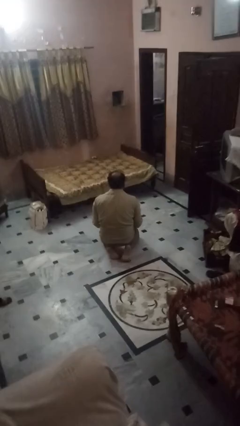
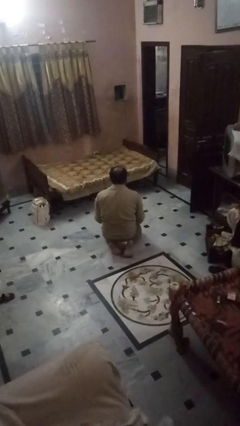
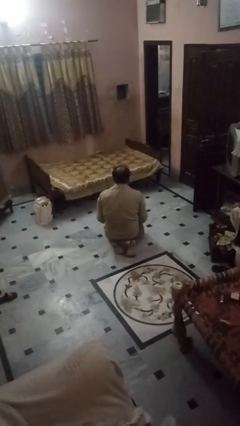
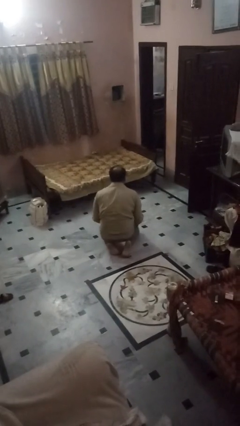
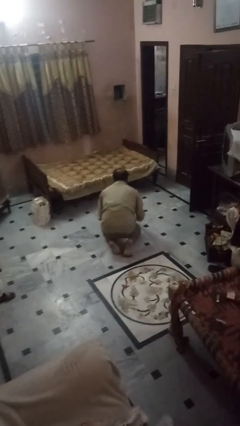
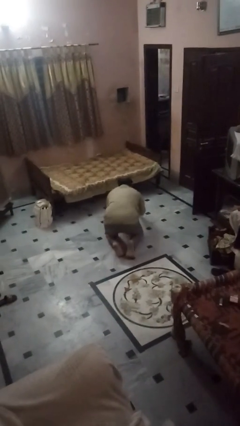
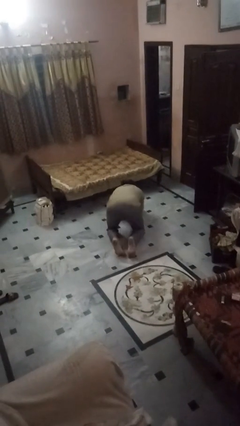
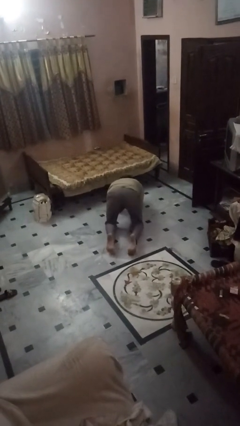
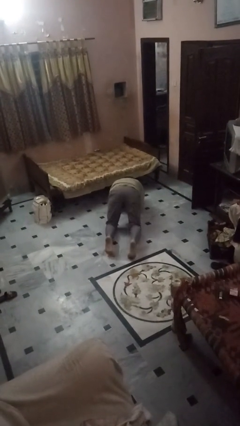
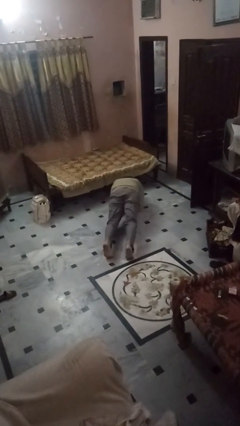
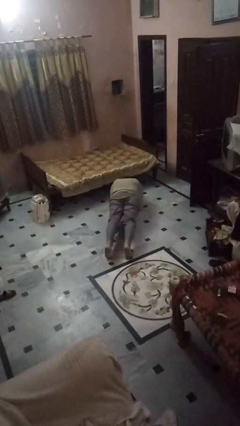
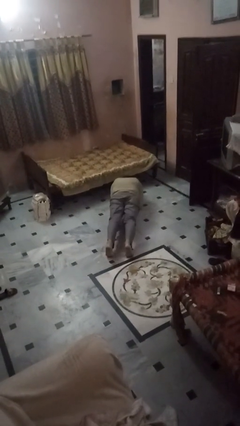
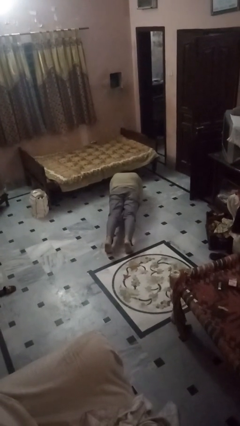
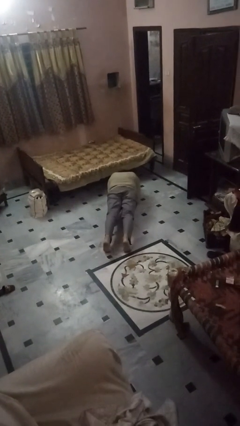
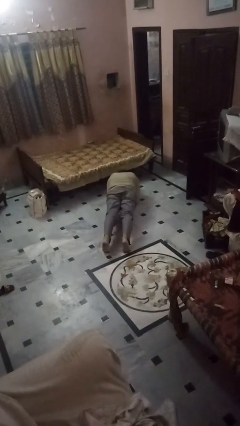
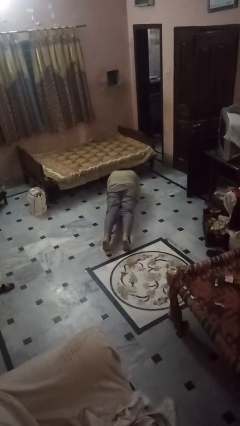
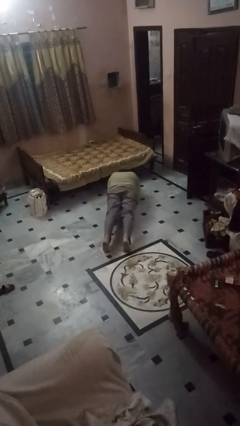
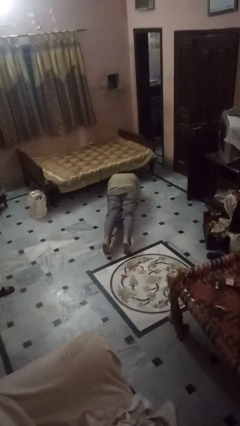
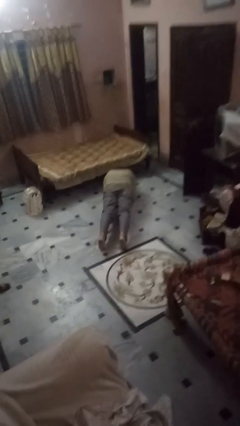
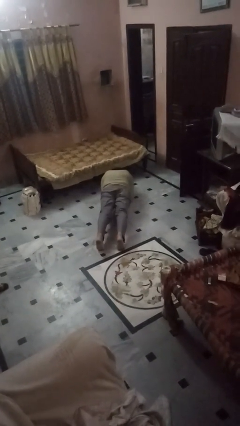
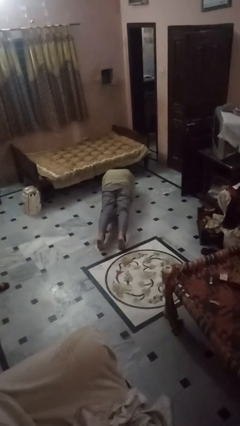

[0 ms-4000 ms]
person exercises with plank

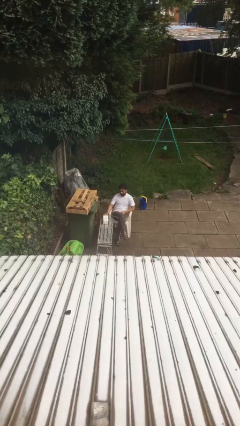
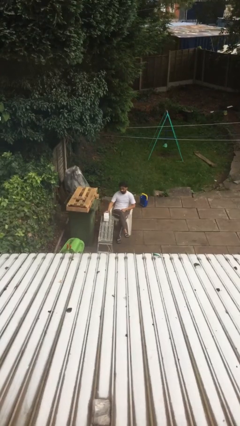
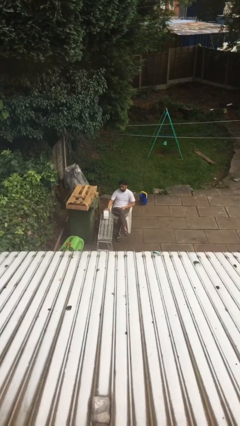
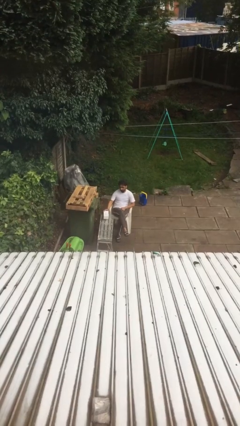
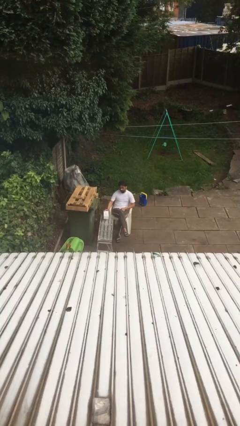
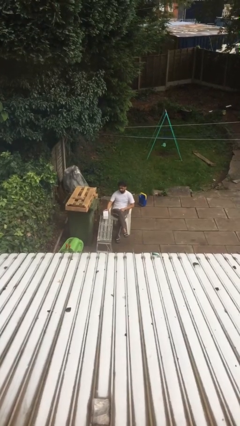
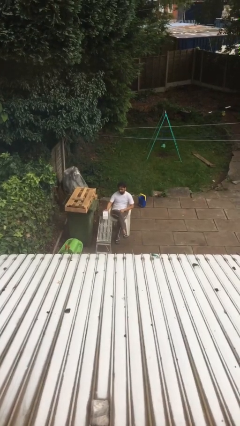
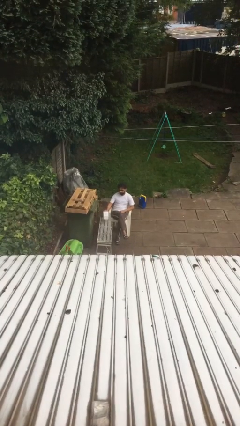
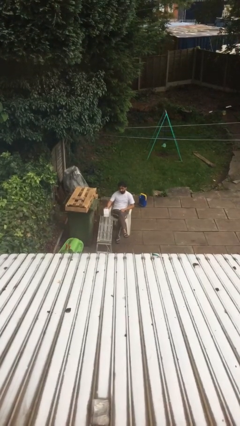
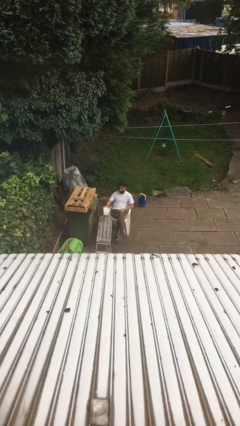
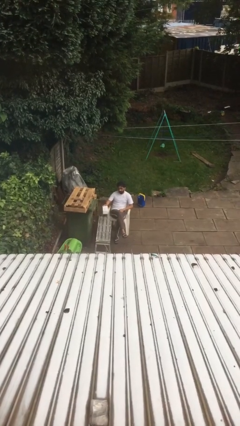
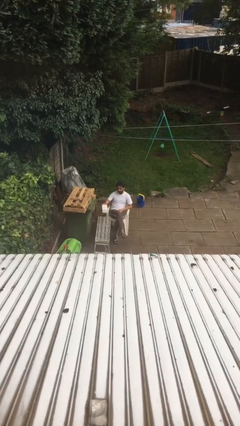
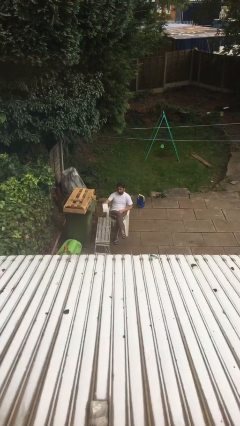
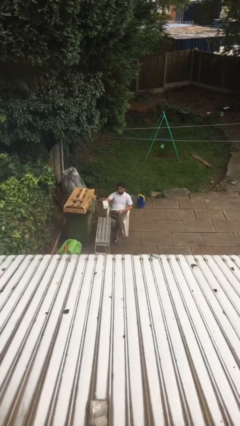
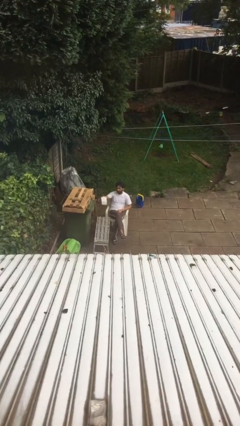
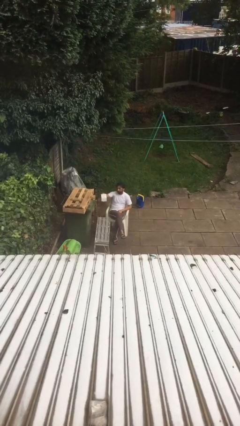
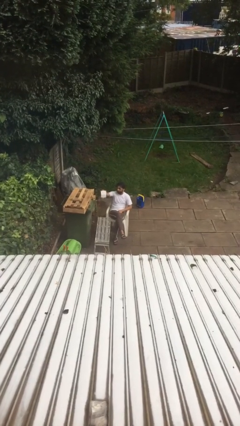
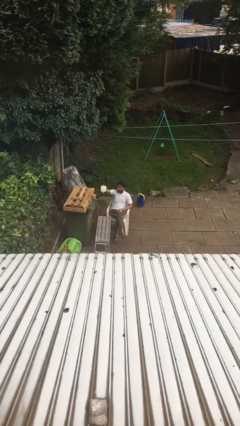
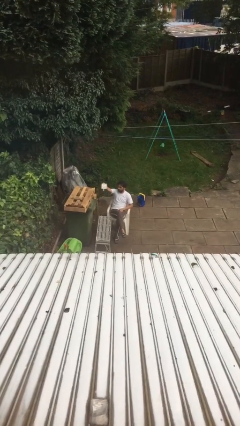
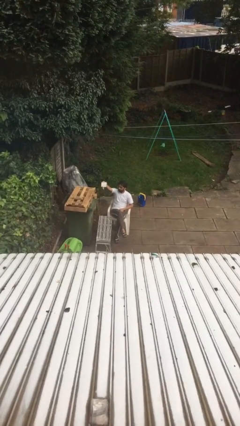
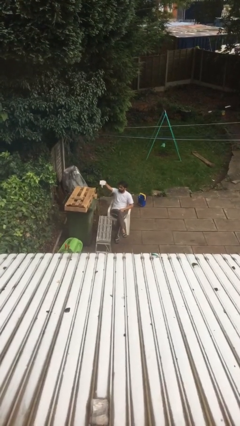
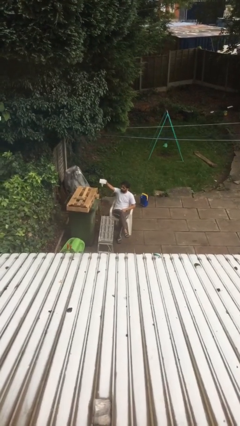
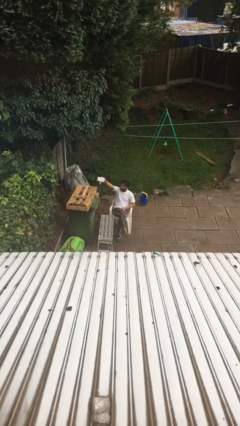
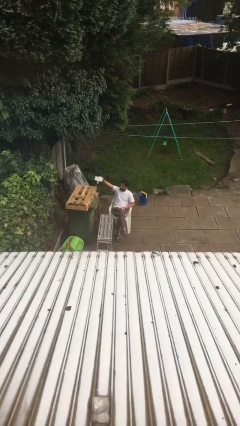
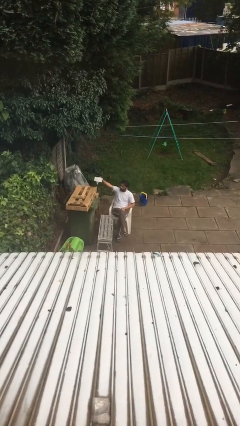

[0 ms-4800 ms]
person picks up object from table

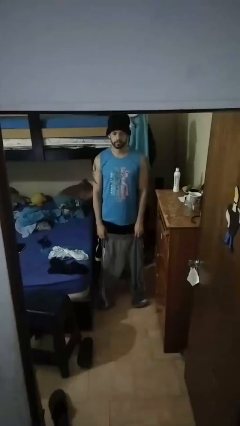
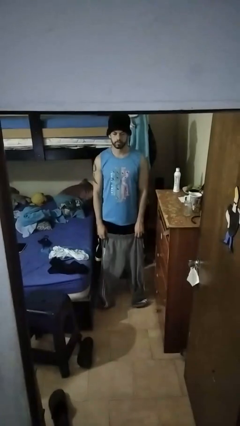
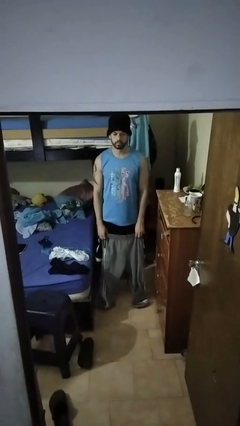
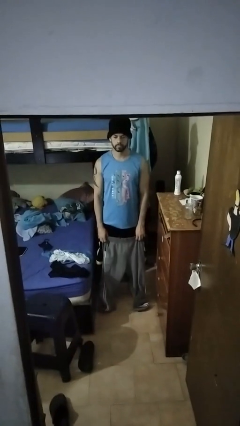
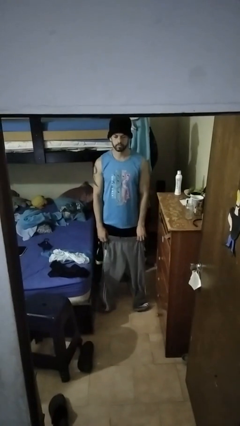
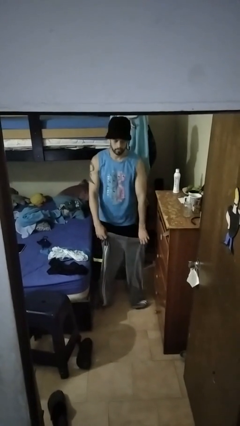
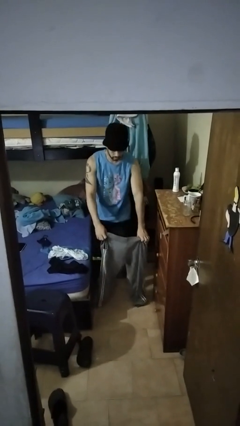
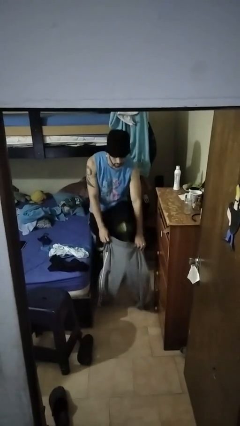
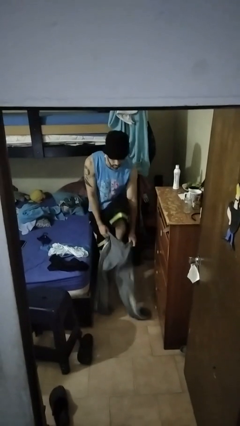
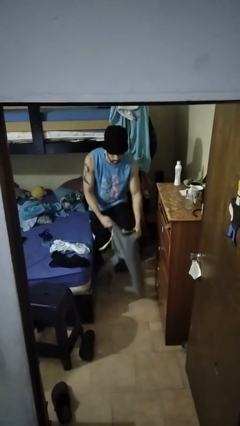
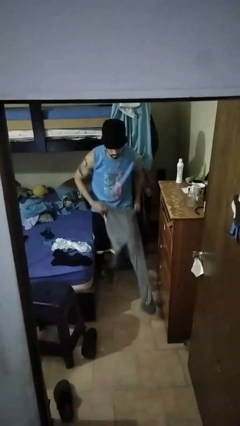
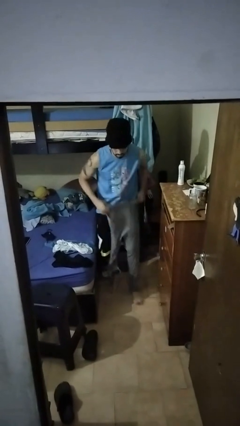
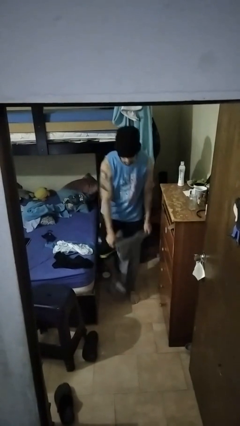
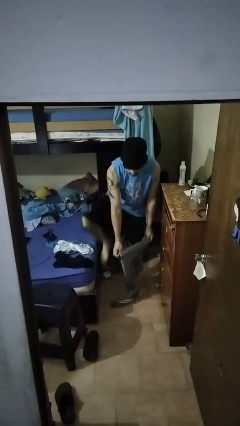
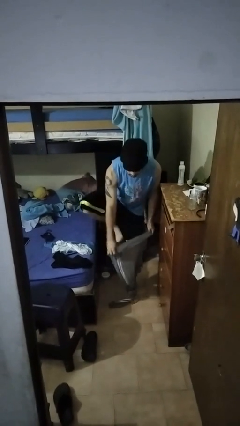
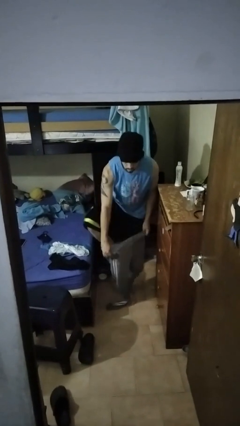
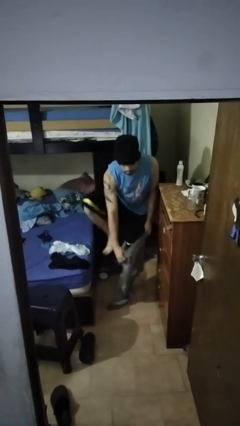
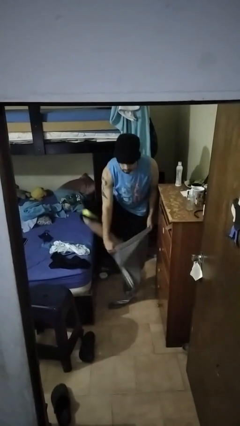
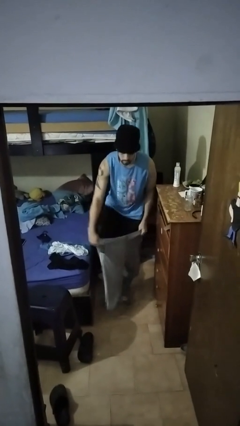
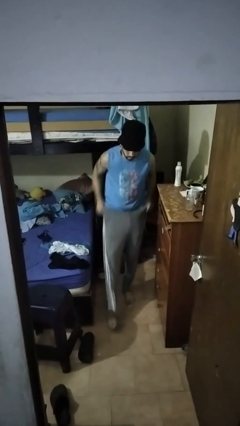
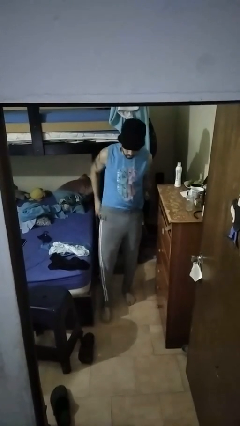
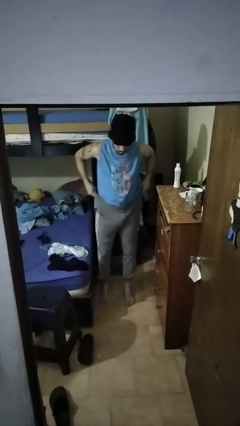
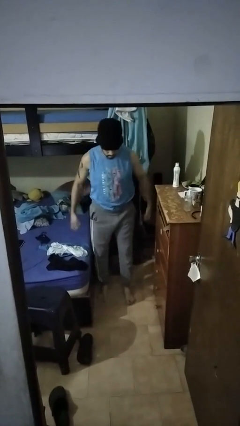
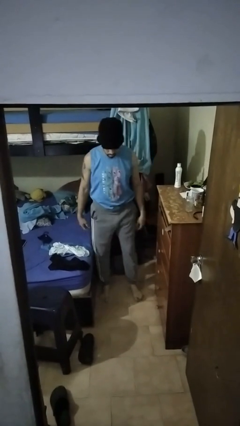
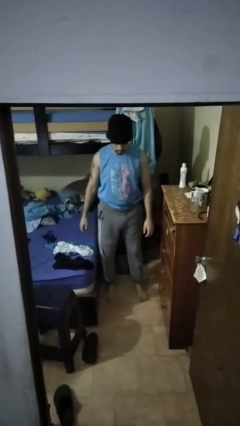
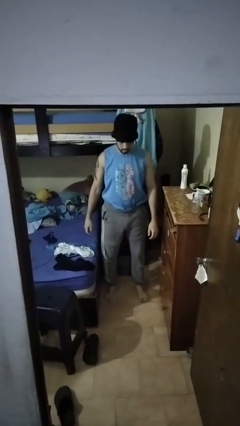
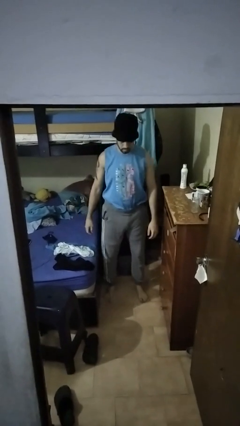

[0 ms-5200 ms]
person puts on pants

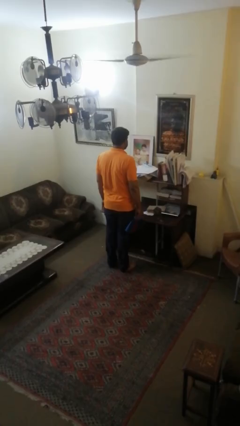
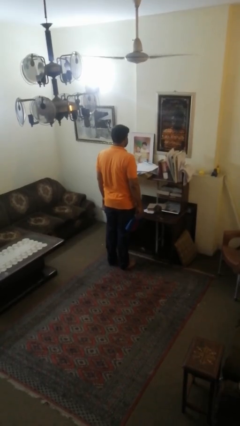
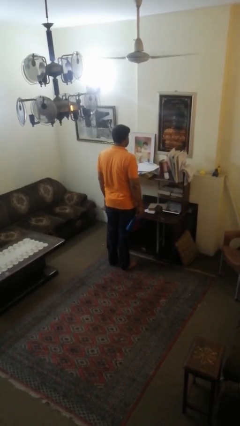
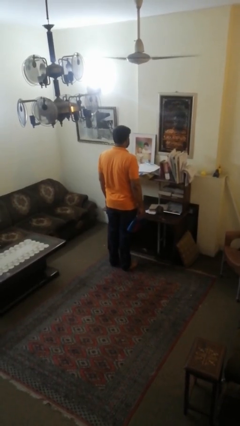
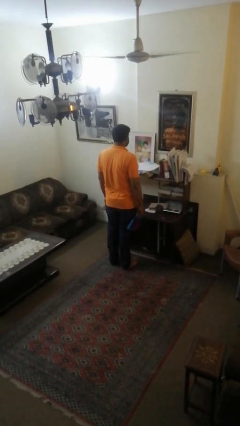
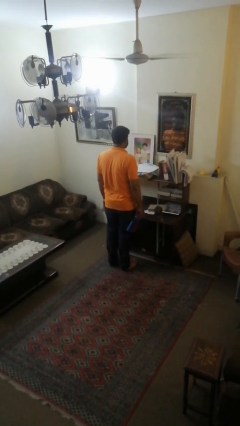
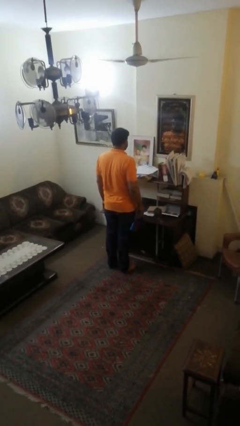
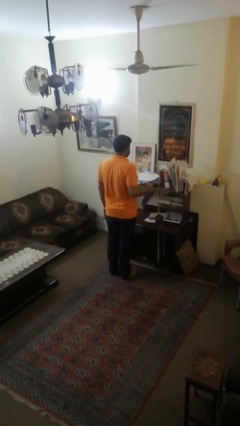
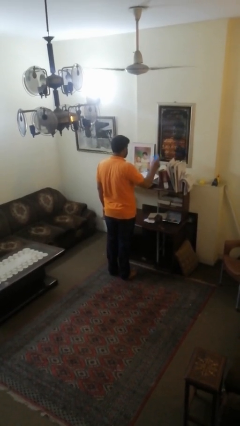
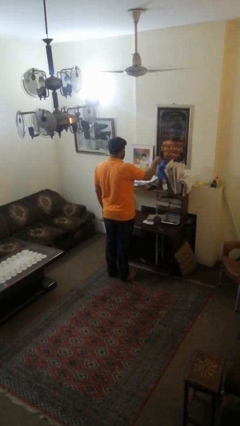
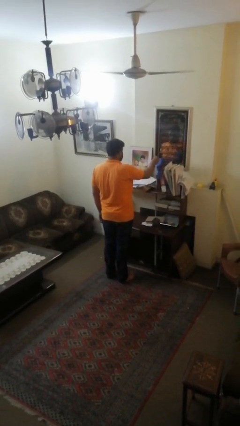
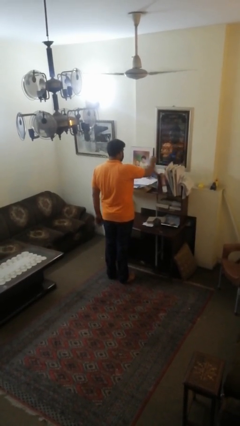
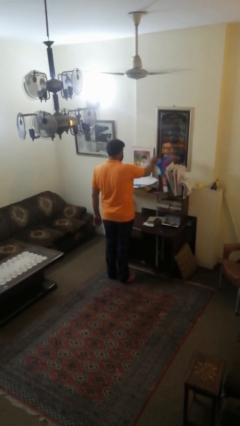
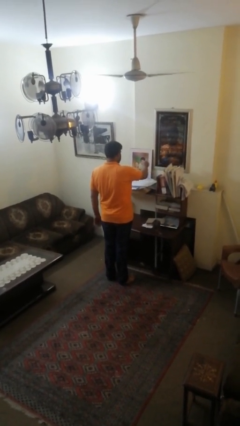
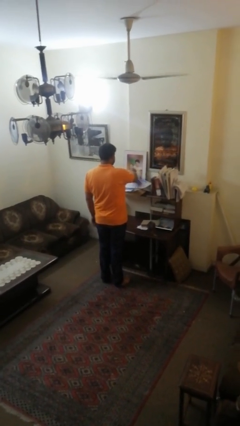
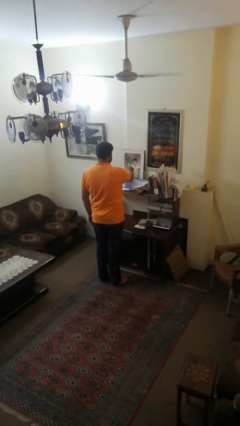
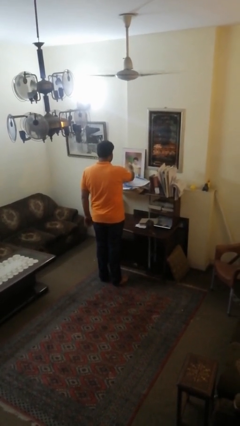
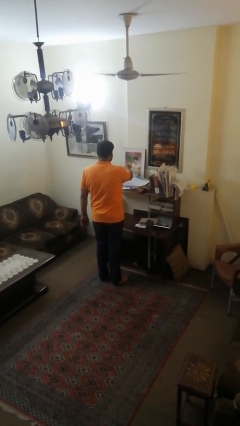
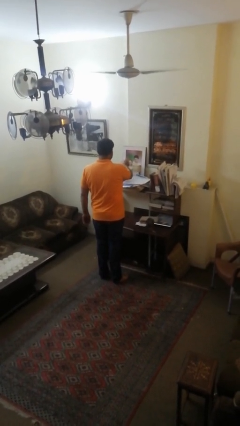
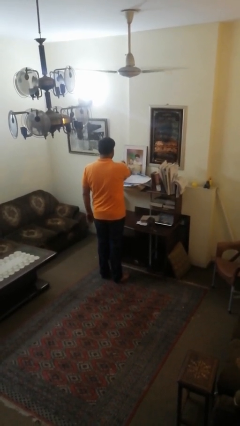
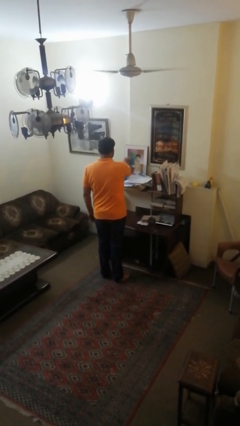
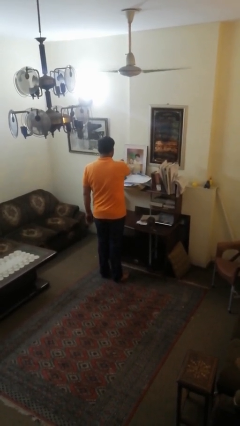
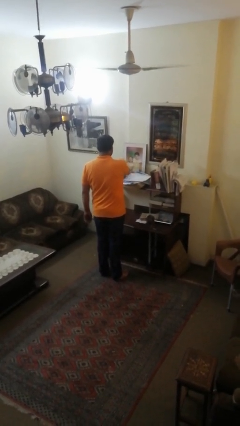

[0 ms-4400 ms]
person dusts furniture
